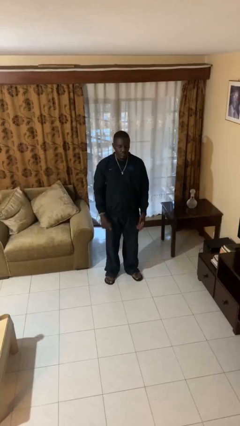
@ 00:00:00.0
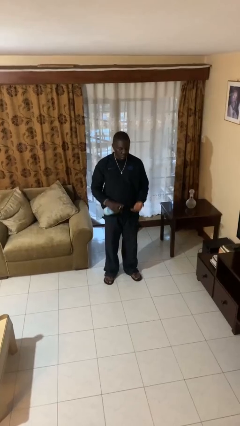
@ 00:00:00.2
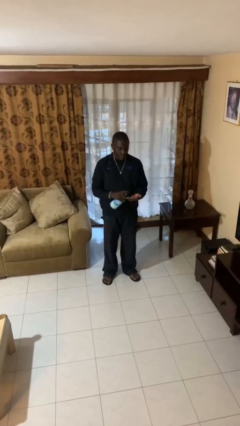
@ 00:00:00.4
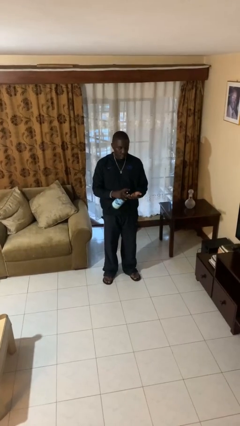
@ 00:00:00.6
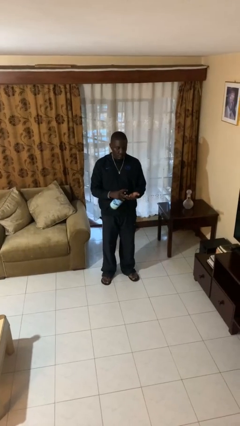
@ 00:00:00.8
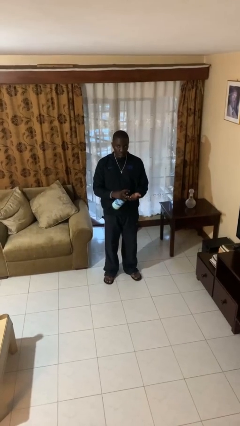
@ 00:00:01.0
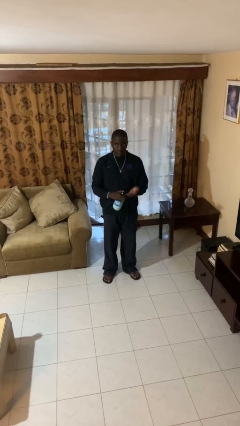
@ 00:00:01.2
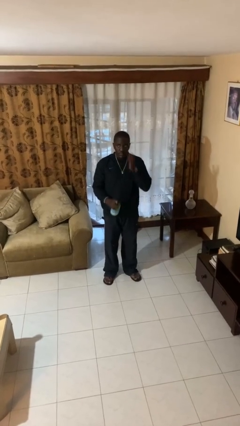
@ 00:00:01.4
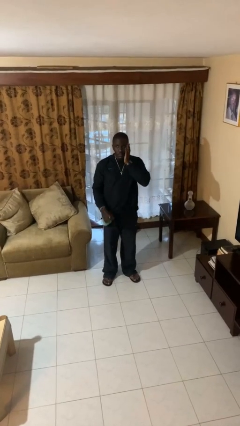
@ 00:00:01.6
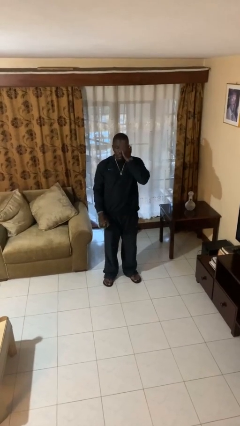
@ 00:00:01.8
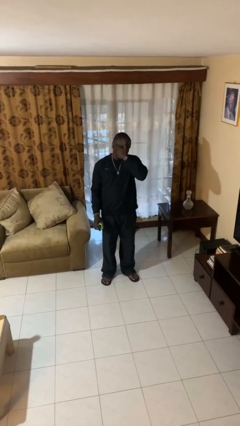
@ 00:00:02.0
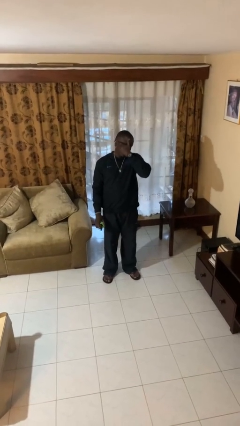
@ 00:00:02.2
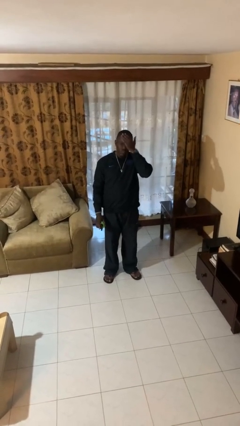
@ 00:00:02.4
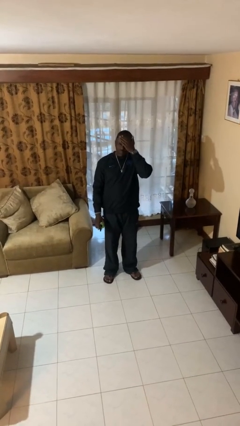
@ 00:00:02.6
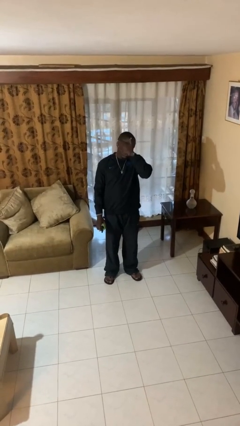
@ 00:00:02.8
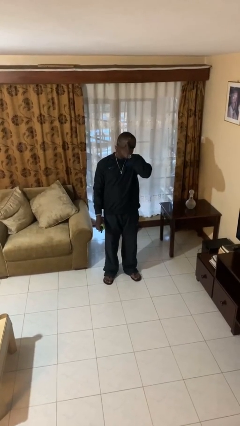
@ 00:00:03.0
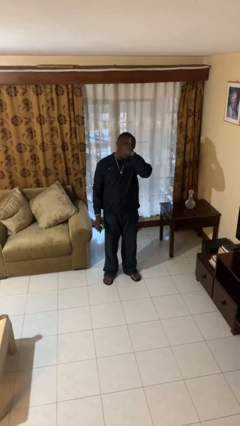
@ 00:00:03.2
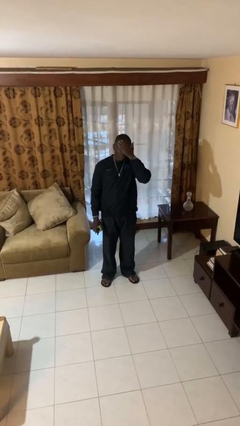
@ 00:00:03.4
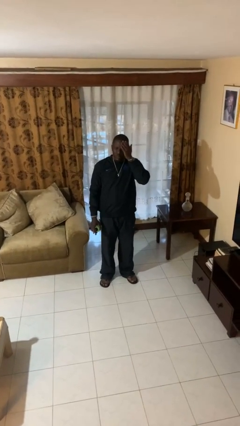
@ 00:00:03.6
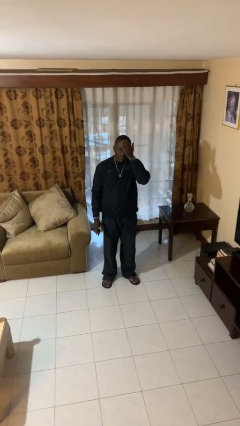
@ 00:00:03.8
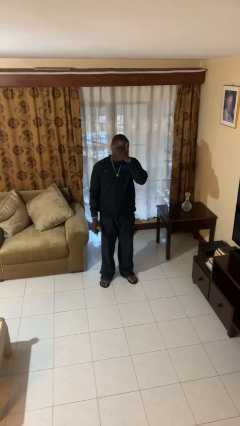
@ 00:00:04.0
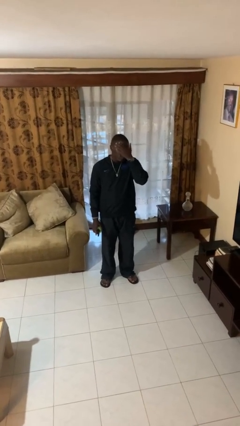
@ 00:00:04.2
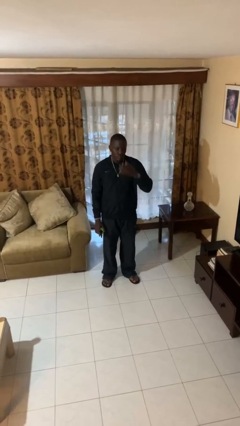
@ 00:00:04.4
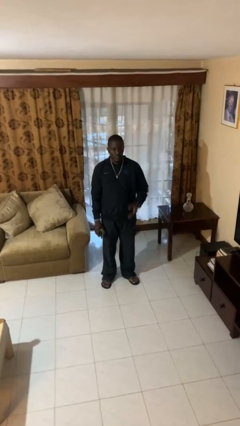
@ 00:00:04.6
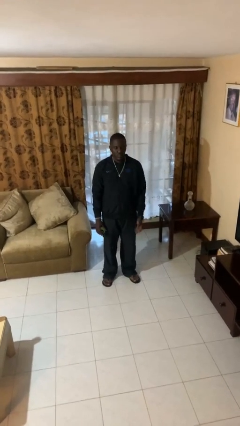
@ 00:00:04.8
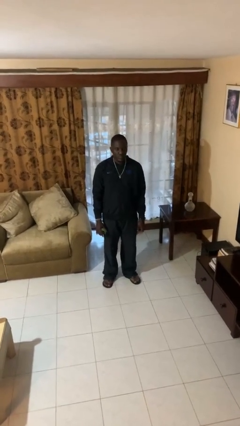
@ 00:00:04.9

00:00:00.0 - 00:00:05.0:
person applies facial moisturizer

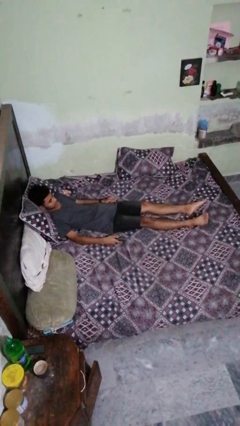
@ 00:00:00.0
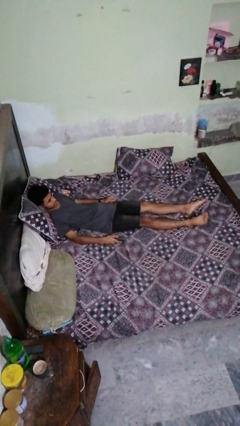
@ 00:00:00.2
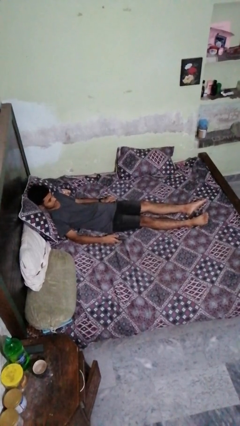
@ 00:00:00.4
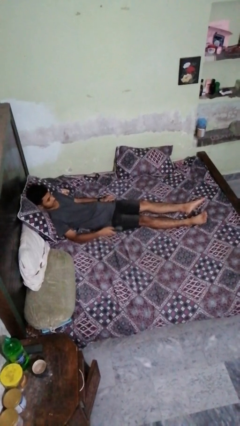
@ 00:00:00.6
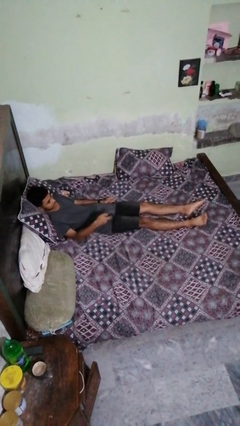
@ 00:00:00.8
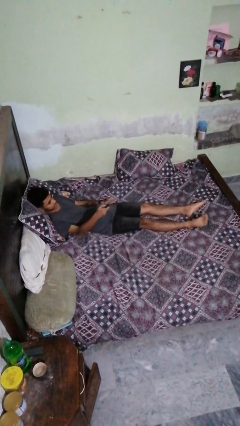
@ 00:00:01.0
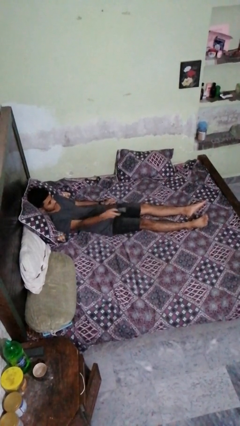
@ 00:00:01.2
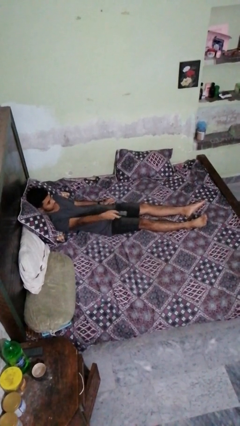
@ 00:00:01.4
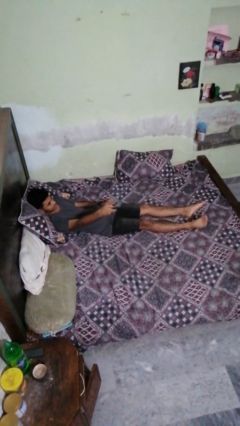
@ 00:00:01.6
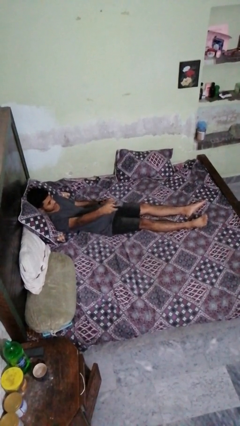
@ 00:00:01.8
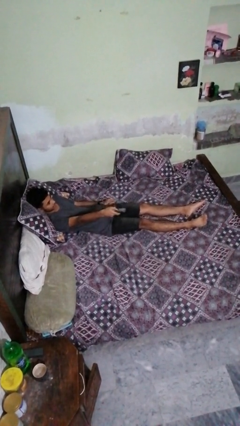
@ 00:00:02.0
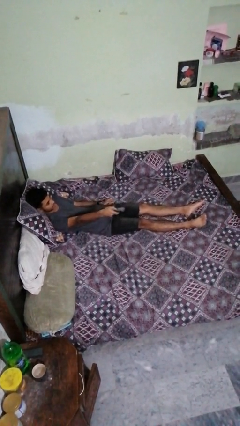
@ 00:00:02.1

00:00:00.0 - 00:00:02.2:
person uses television remote

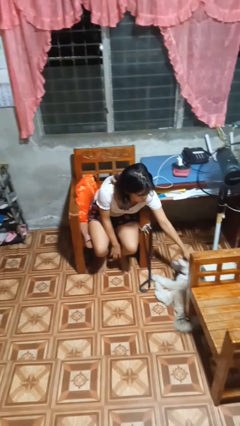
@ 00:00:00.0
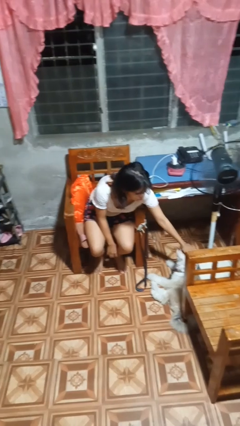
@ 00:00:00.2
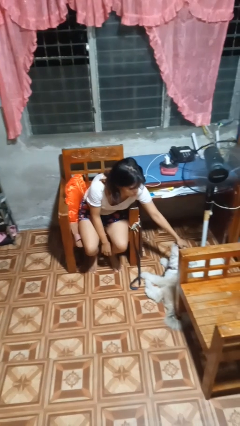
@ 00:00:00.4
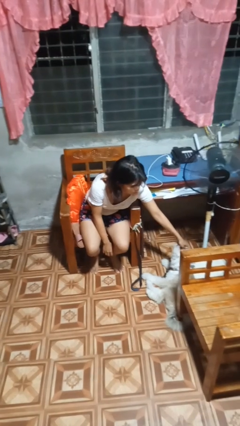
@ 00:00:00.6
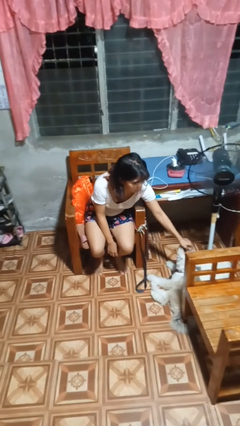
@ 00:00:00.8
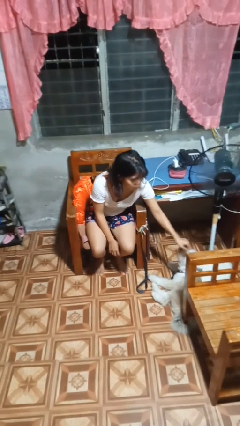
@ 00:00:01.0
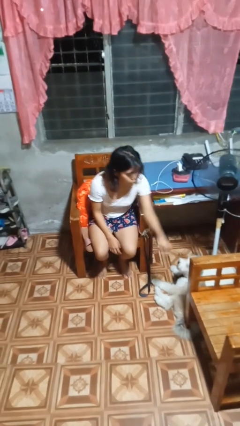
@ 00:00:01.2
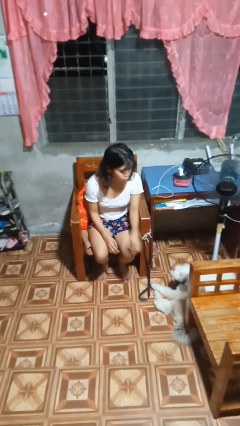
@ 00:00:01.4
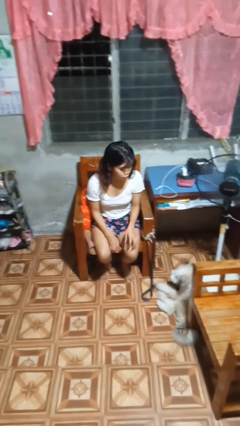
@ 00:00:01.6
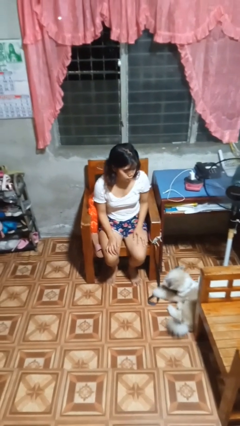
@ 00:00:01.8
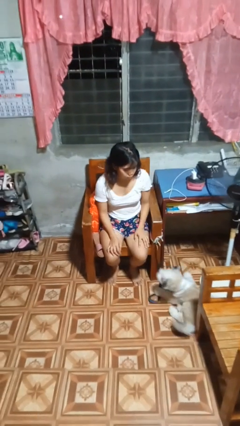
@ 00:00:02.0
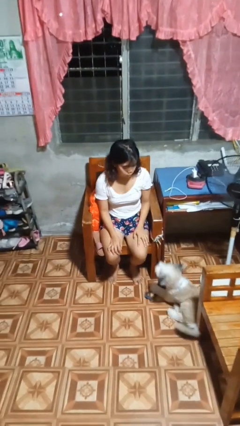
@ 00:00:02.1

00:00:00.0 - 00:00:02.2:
person pets dog

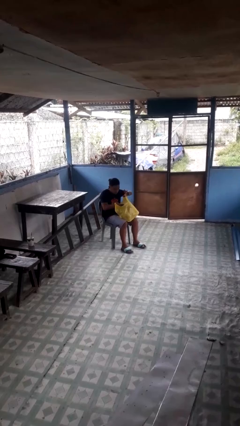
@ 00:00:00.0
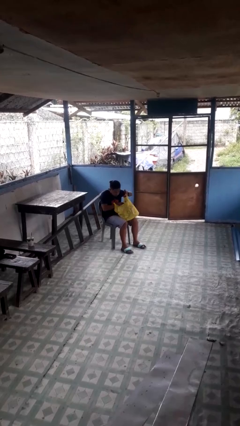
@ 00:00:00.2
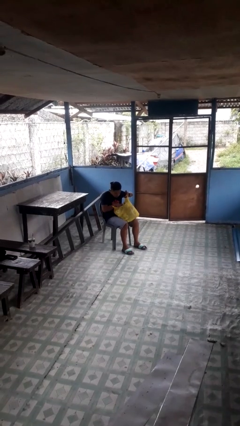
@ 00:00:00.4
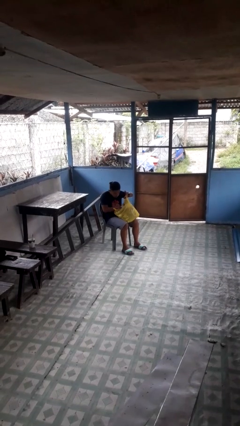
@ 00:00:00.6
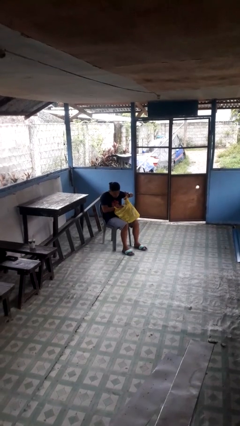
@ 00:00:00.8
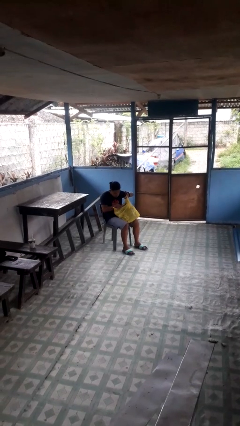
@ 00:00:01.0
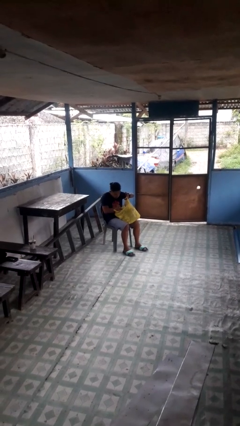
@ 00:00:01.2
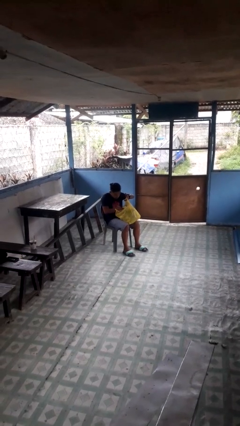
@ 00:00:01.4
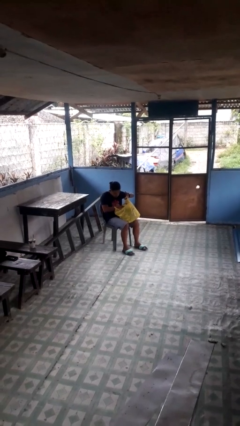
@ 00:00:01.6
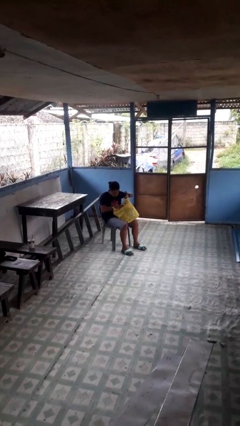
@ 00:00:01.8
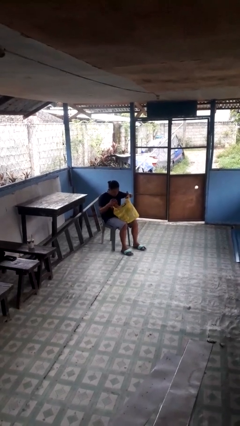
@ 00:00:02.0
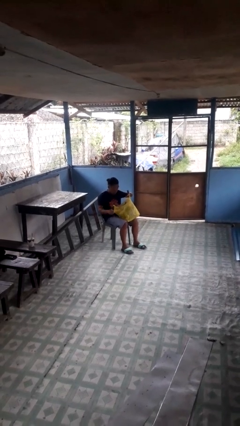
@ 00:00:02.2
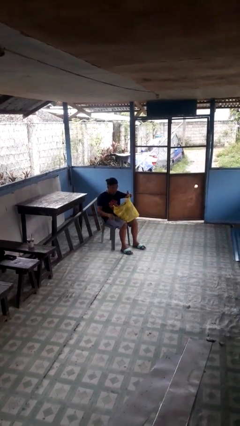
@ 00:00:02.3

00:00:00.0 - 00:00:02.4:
person searches in bag

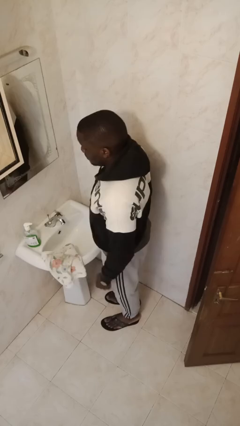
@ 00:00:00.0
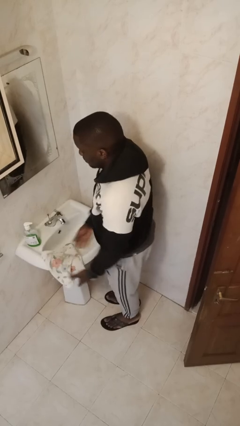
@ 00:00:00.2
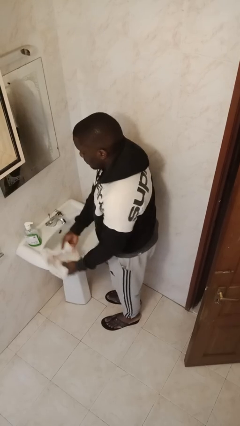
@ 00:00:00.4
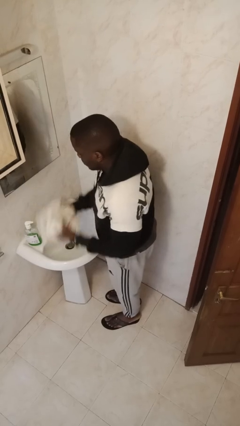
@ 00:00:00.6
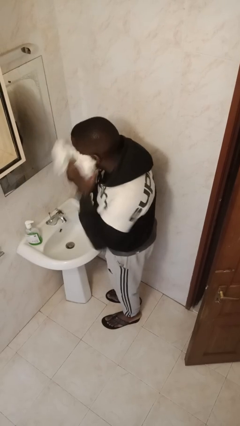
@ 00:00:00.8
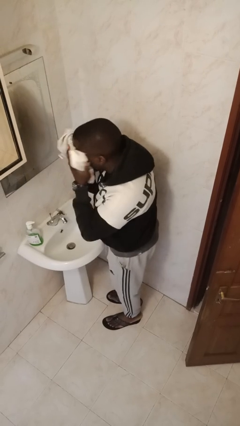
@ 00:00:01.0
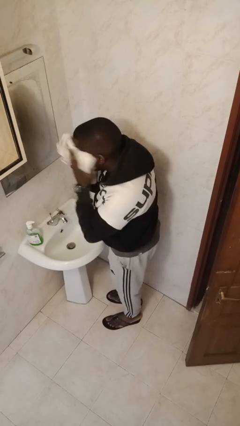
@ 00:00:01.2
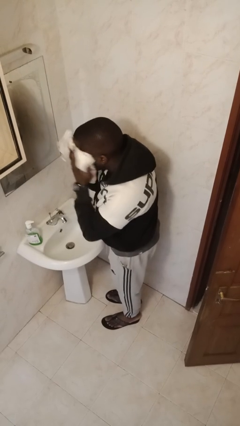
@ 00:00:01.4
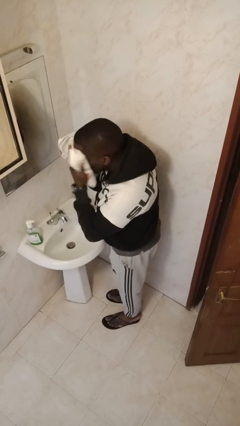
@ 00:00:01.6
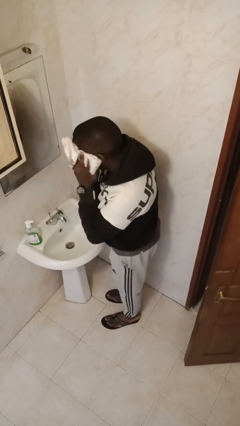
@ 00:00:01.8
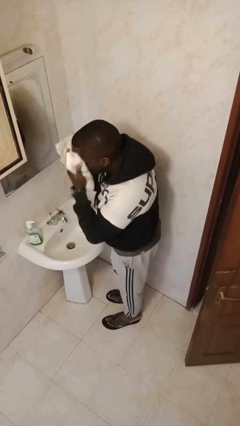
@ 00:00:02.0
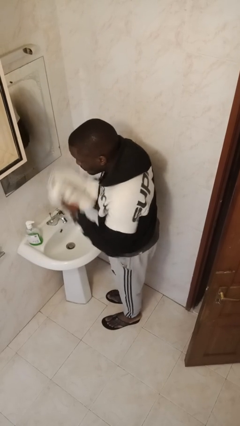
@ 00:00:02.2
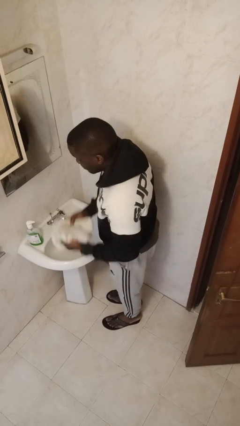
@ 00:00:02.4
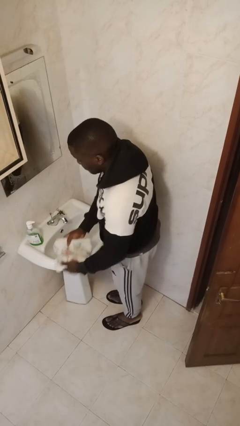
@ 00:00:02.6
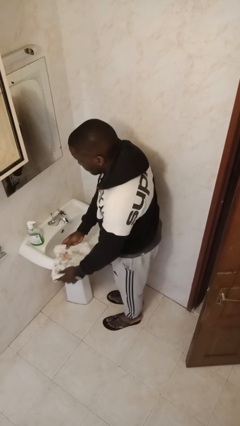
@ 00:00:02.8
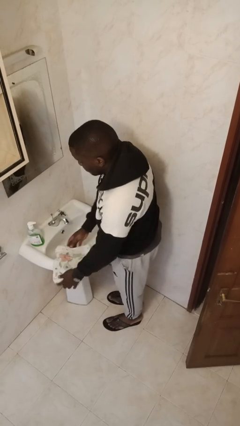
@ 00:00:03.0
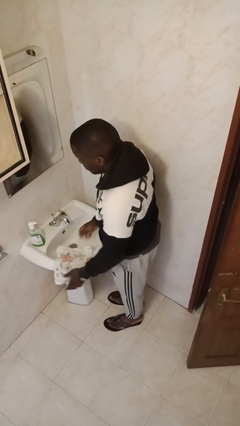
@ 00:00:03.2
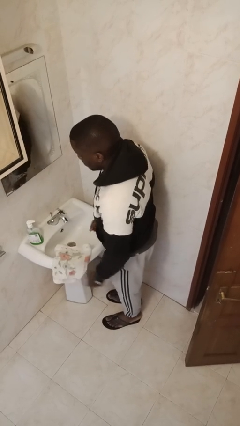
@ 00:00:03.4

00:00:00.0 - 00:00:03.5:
person dries face with towel

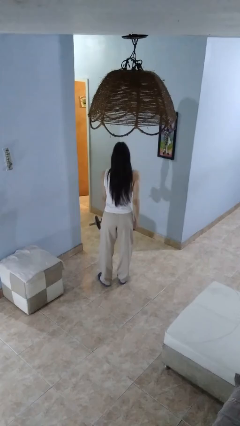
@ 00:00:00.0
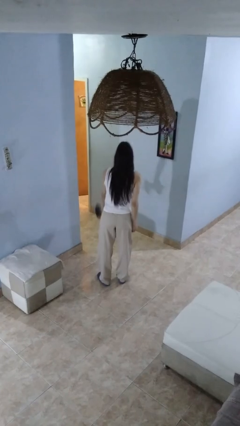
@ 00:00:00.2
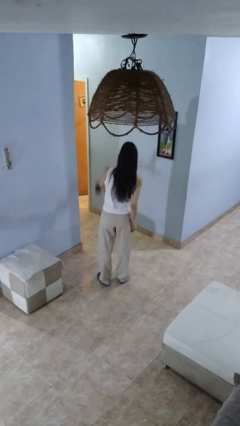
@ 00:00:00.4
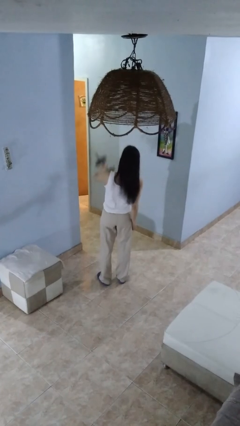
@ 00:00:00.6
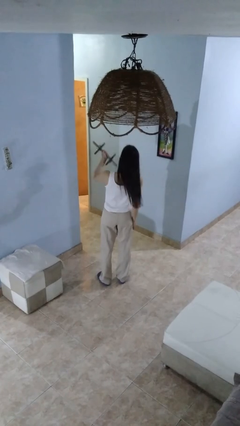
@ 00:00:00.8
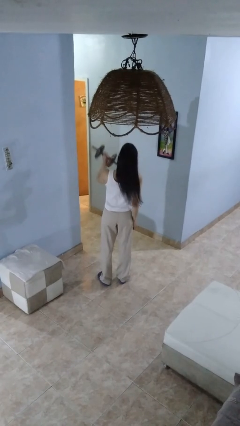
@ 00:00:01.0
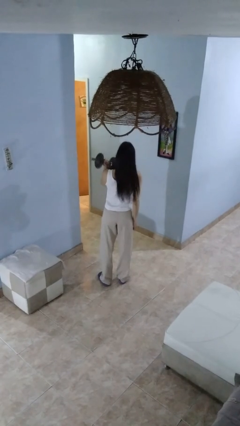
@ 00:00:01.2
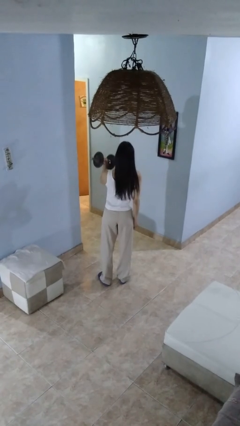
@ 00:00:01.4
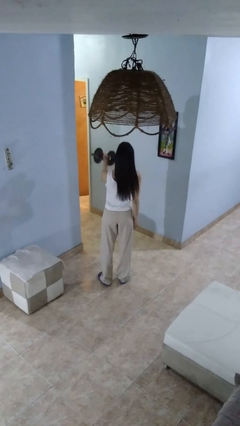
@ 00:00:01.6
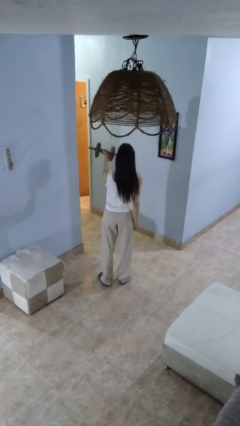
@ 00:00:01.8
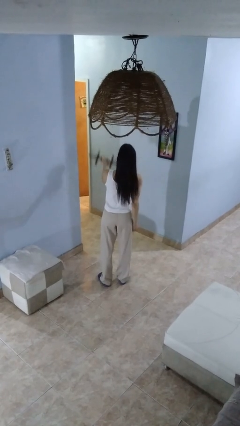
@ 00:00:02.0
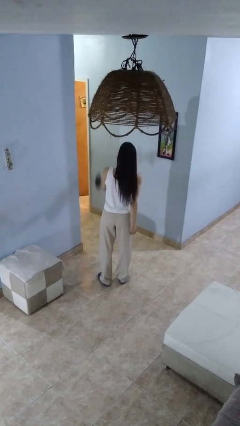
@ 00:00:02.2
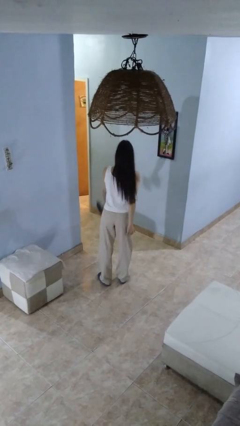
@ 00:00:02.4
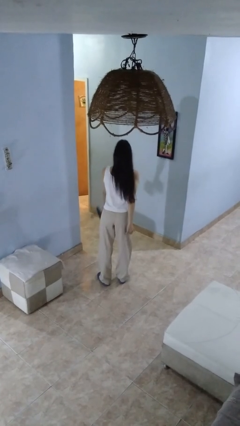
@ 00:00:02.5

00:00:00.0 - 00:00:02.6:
person lifts dumbbells
